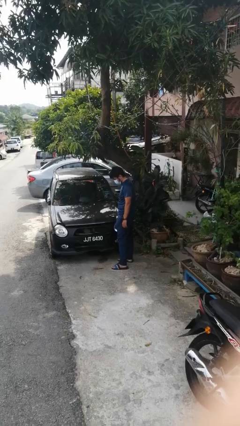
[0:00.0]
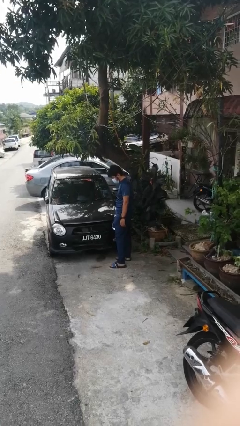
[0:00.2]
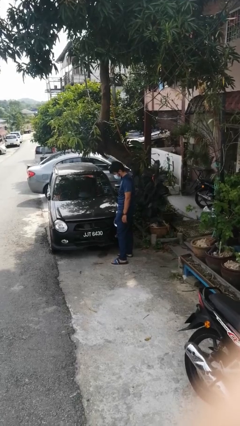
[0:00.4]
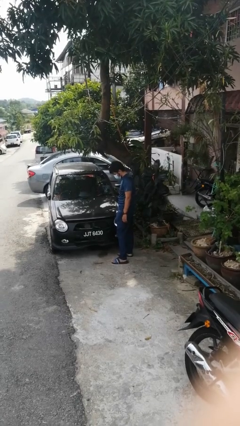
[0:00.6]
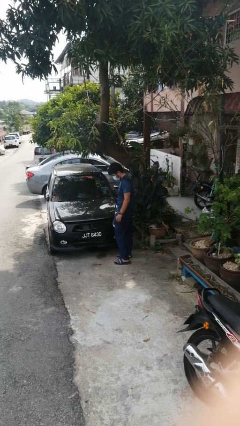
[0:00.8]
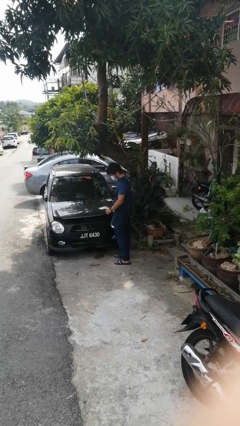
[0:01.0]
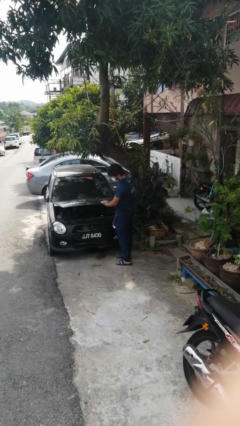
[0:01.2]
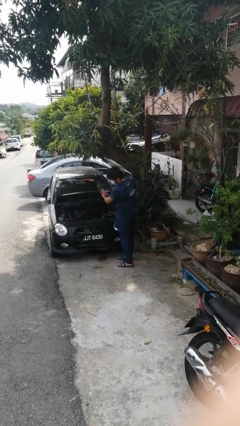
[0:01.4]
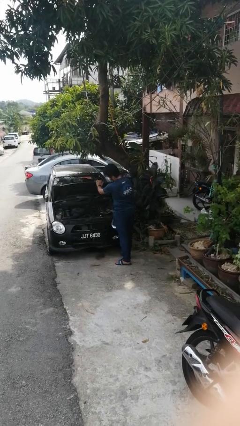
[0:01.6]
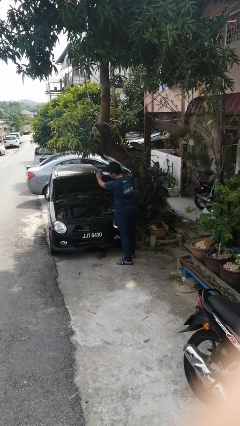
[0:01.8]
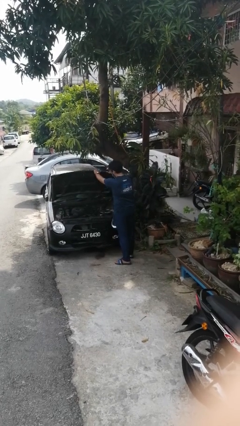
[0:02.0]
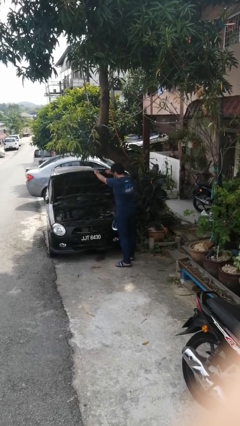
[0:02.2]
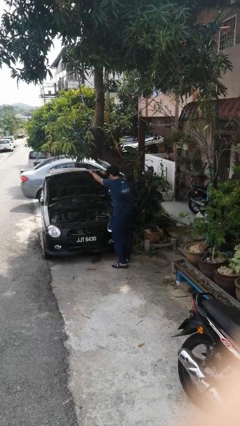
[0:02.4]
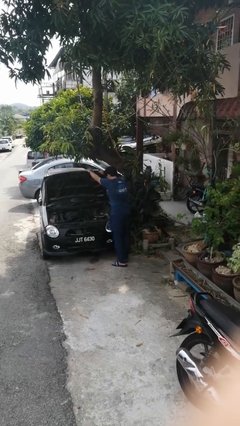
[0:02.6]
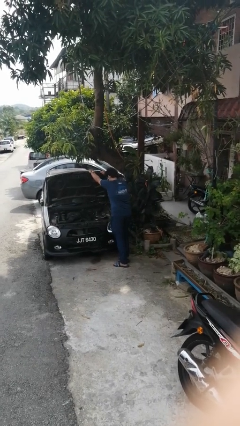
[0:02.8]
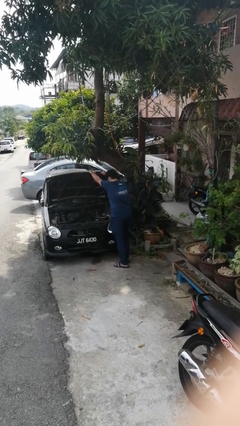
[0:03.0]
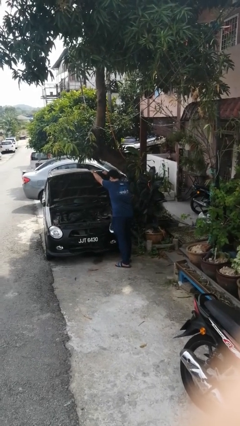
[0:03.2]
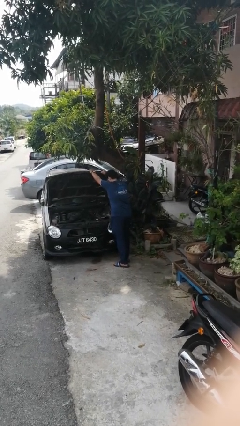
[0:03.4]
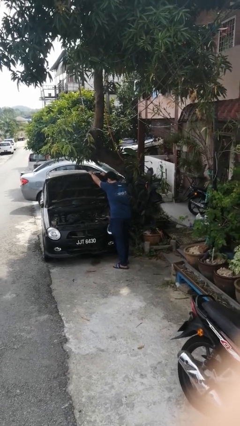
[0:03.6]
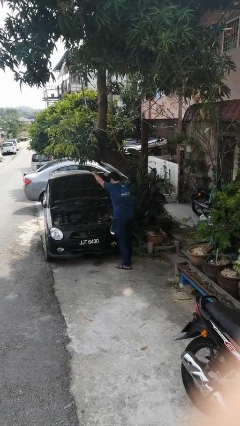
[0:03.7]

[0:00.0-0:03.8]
person opens car hood

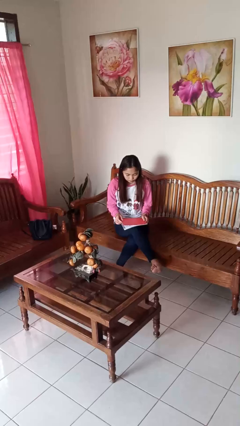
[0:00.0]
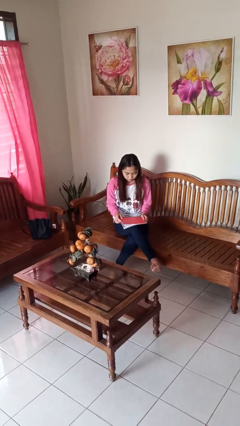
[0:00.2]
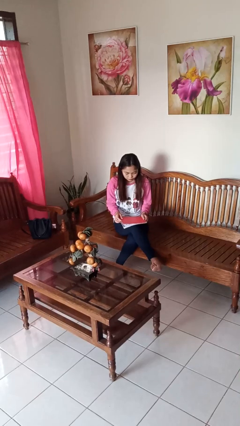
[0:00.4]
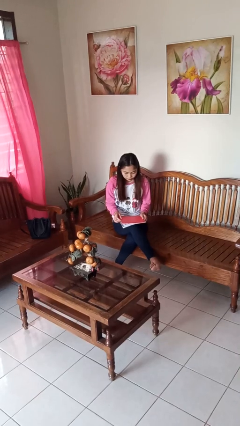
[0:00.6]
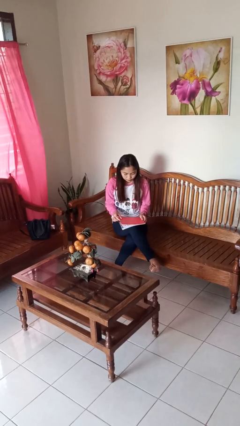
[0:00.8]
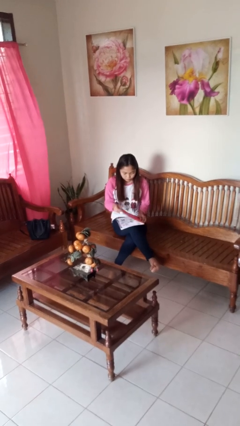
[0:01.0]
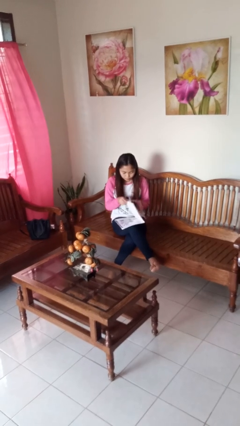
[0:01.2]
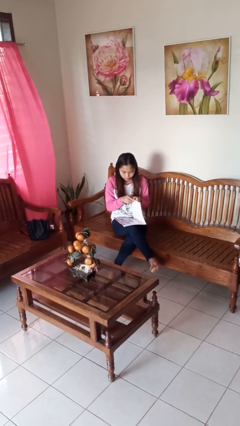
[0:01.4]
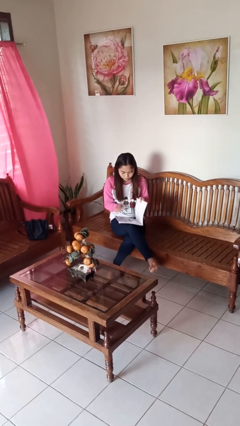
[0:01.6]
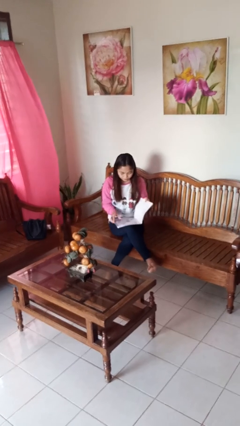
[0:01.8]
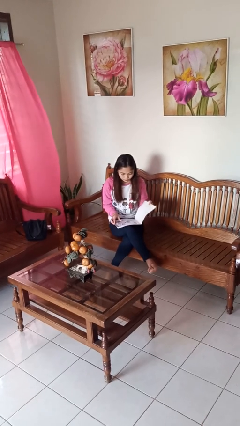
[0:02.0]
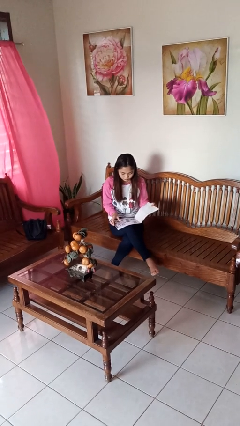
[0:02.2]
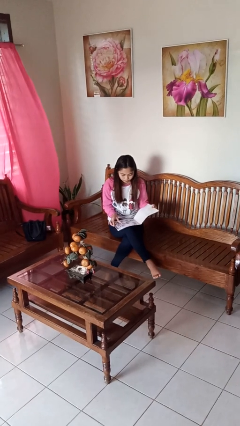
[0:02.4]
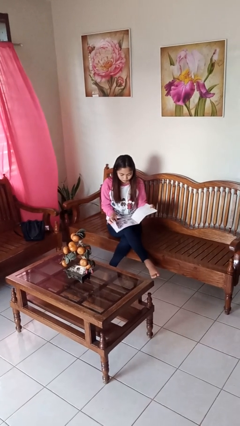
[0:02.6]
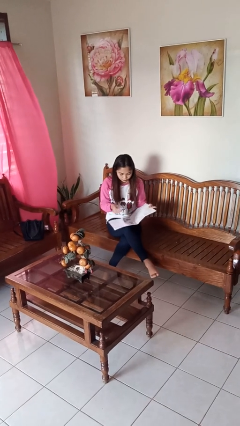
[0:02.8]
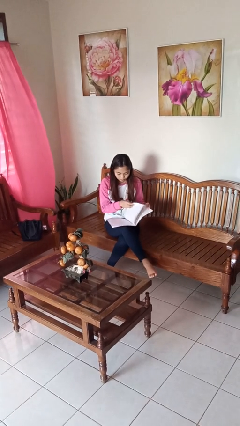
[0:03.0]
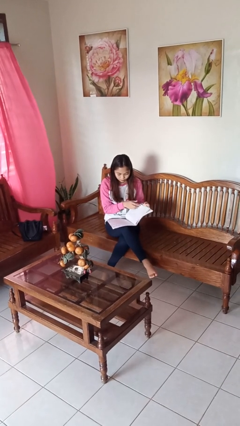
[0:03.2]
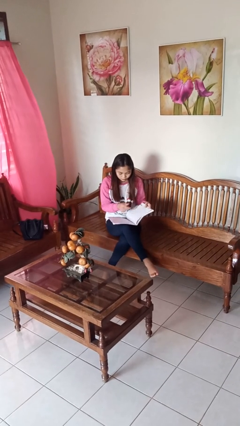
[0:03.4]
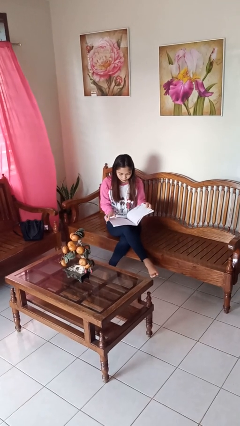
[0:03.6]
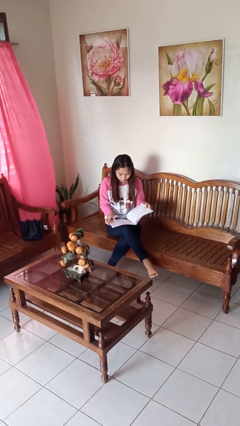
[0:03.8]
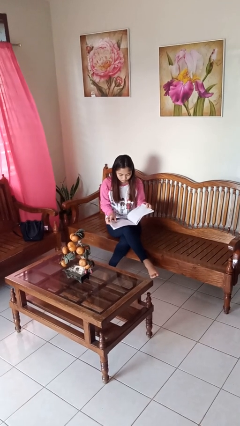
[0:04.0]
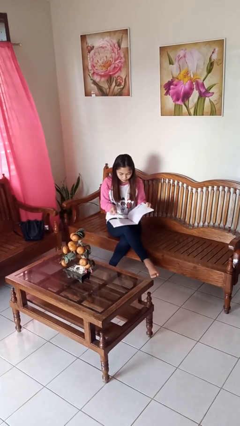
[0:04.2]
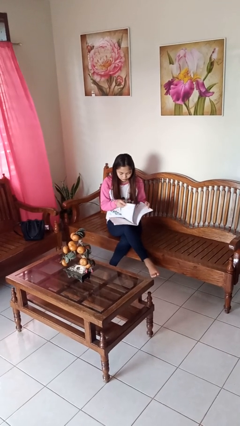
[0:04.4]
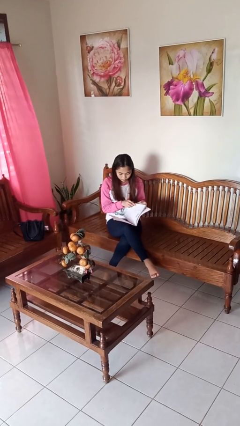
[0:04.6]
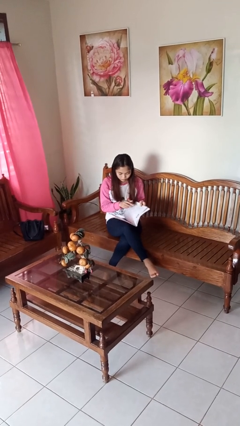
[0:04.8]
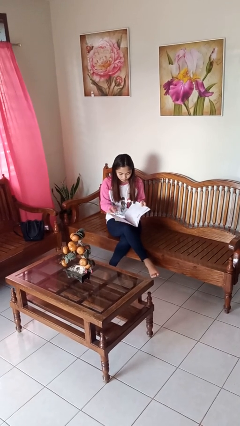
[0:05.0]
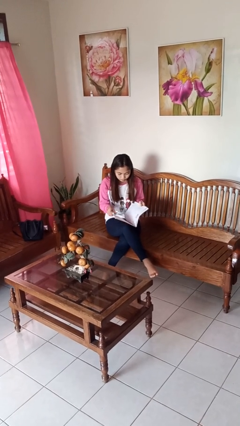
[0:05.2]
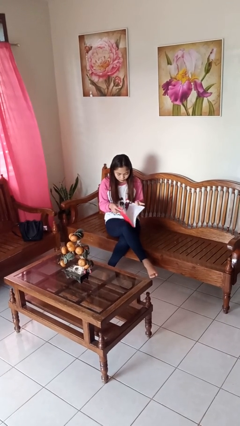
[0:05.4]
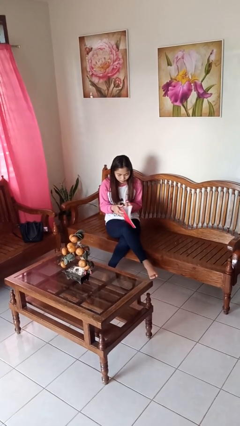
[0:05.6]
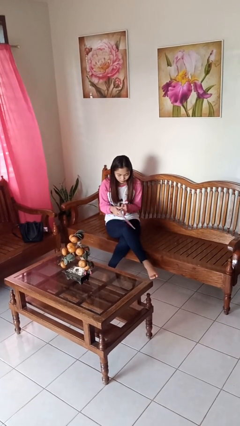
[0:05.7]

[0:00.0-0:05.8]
person reads magazine

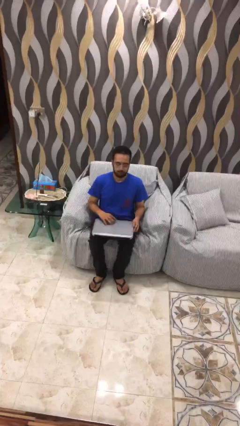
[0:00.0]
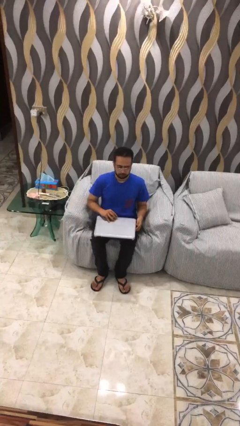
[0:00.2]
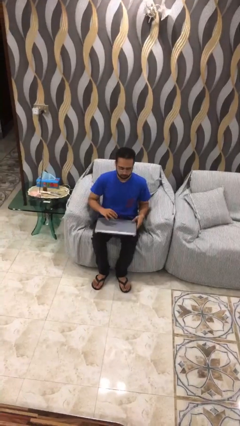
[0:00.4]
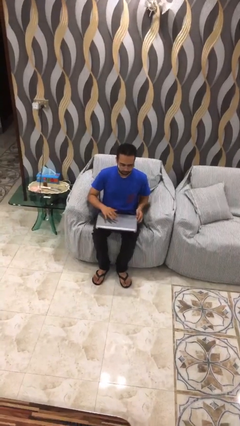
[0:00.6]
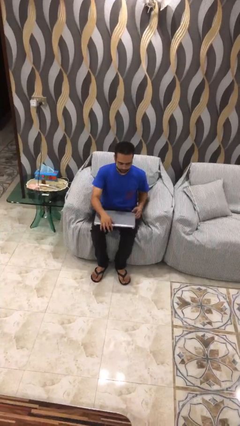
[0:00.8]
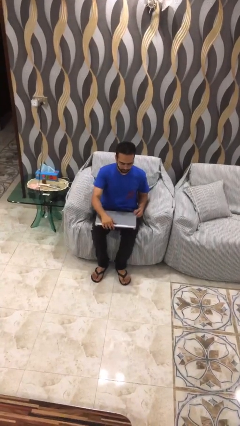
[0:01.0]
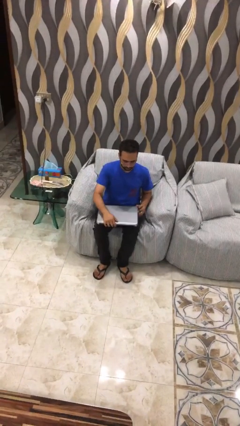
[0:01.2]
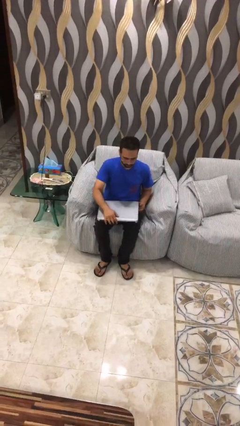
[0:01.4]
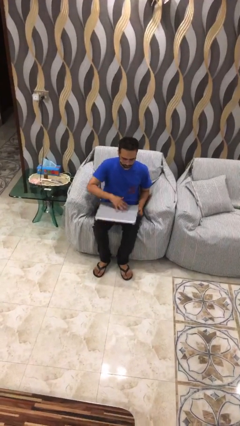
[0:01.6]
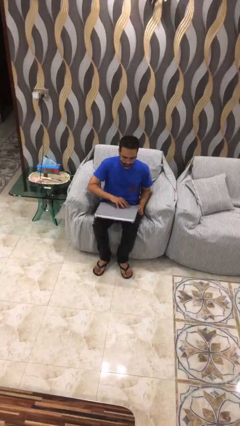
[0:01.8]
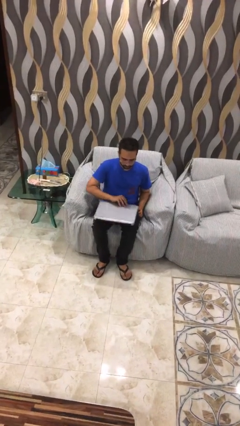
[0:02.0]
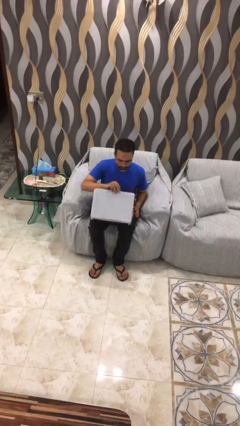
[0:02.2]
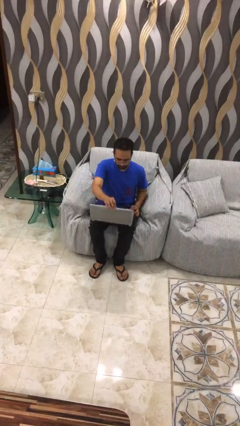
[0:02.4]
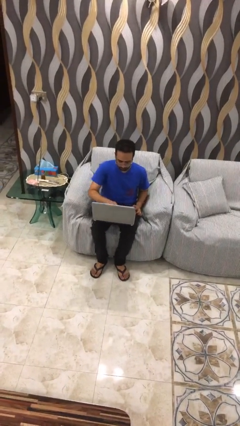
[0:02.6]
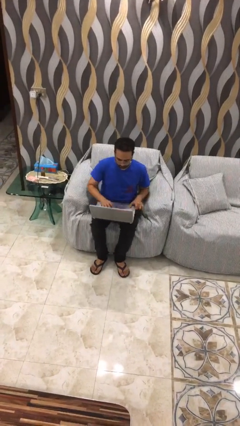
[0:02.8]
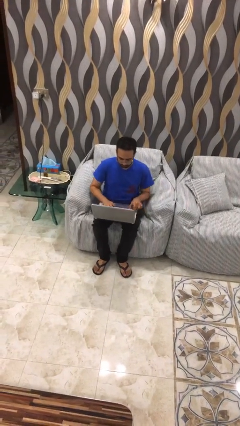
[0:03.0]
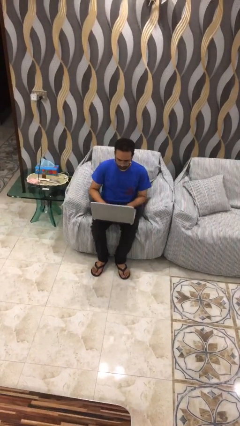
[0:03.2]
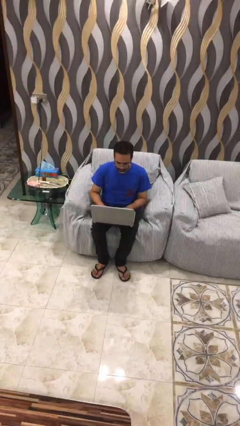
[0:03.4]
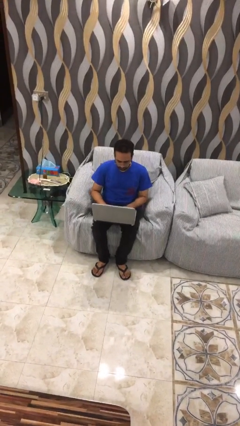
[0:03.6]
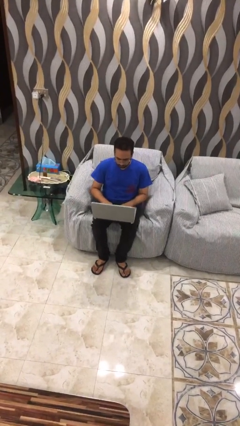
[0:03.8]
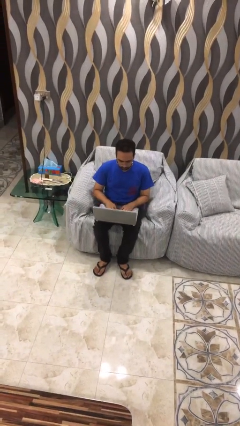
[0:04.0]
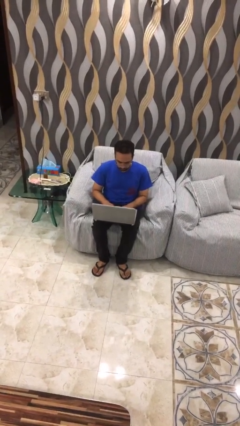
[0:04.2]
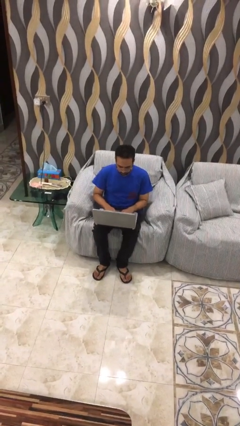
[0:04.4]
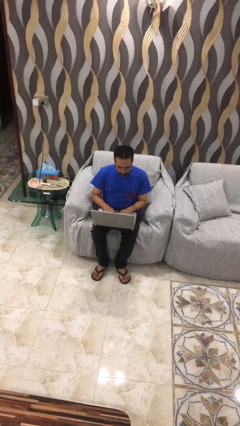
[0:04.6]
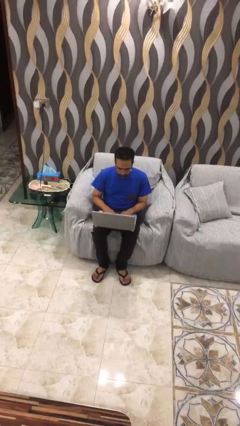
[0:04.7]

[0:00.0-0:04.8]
person interacts with laptop

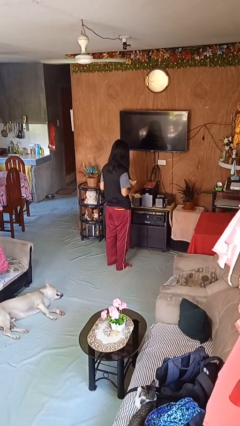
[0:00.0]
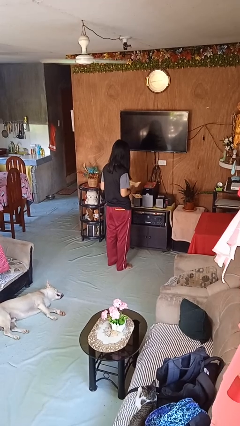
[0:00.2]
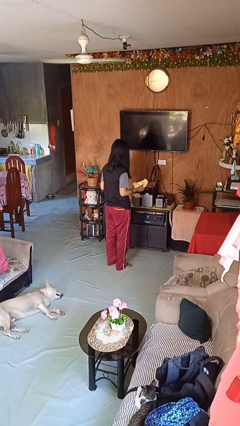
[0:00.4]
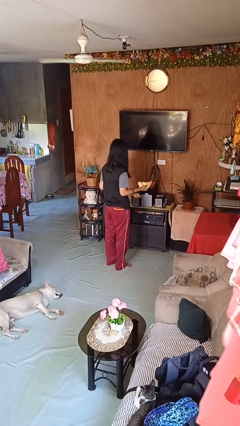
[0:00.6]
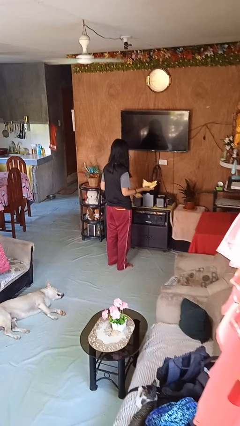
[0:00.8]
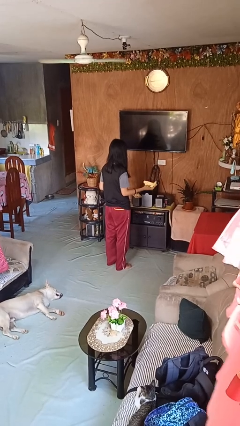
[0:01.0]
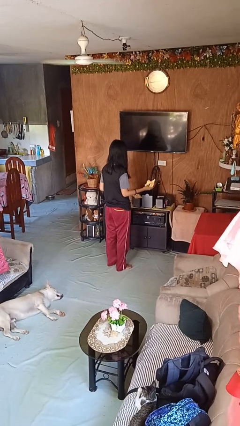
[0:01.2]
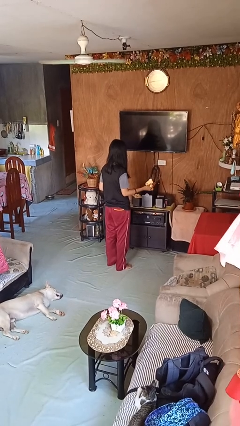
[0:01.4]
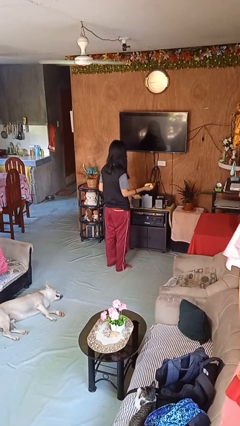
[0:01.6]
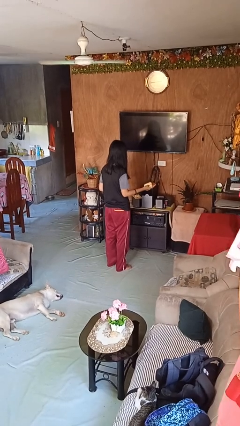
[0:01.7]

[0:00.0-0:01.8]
person crumples paper

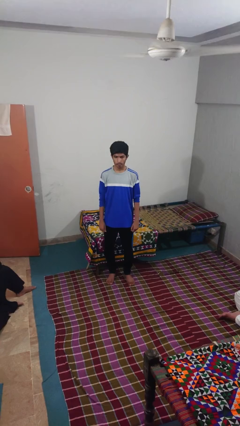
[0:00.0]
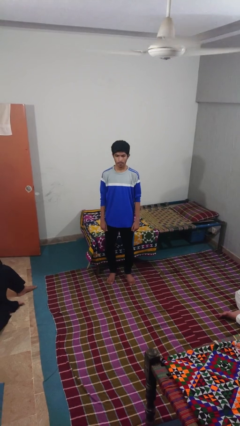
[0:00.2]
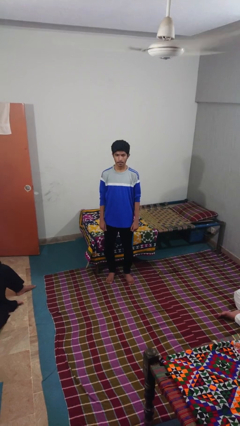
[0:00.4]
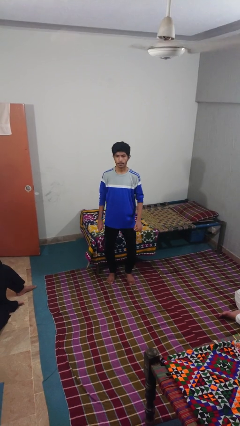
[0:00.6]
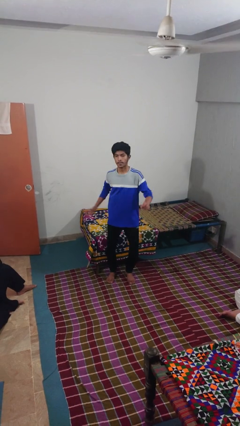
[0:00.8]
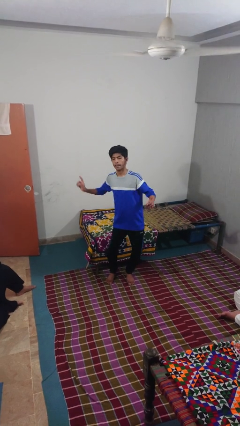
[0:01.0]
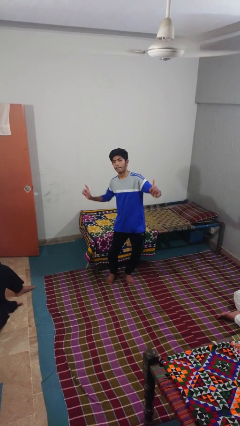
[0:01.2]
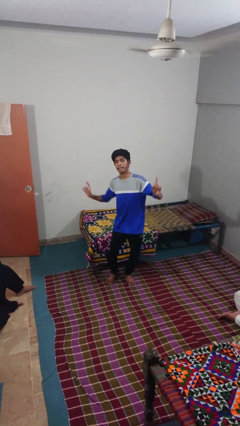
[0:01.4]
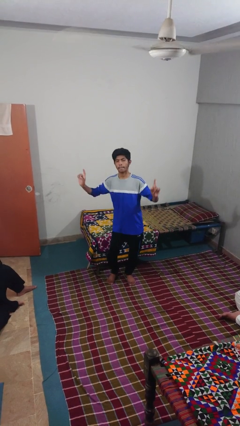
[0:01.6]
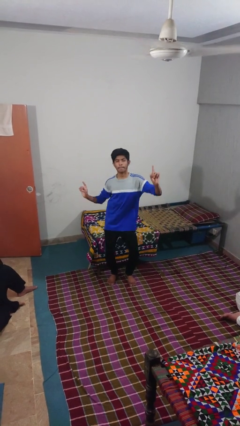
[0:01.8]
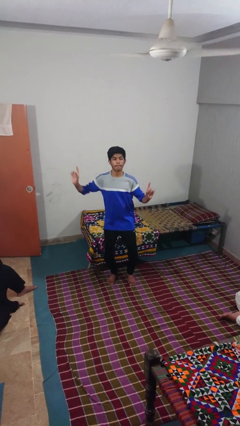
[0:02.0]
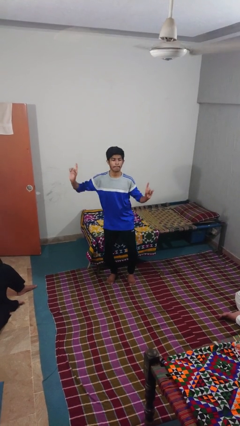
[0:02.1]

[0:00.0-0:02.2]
person dances in place
